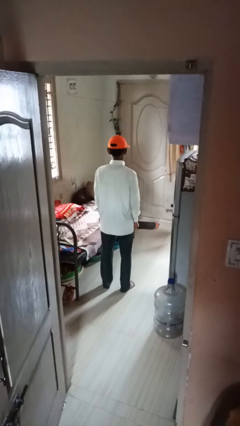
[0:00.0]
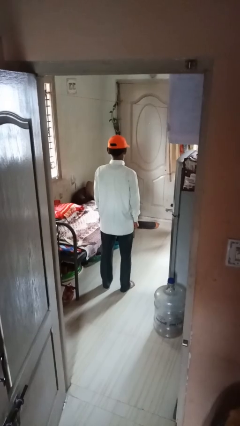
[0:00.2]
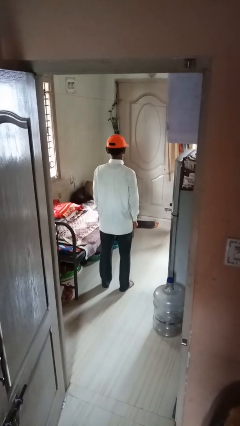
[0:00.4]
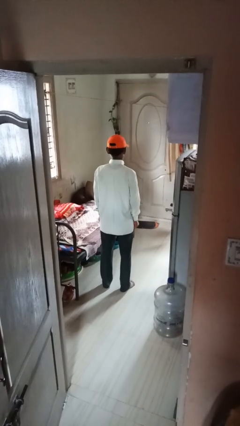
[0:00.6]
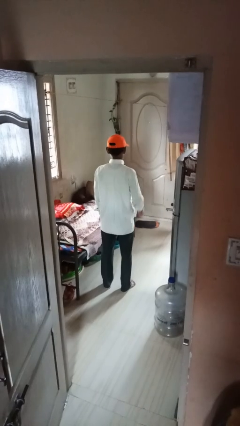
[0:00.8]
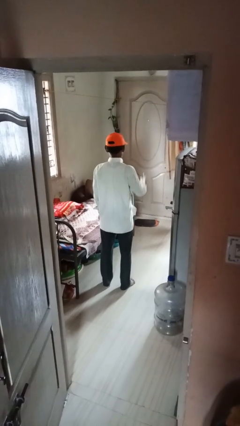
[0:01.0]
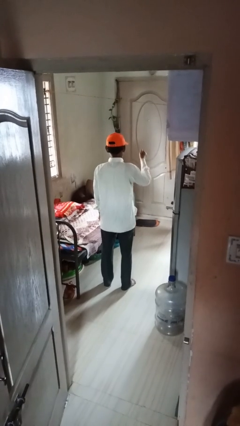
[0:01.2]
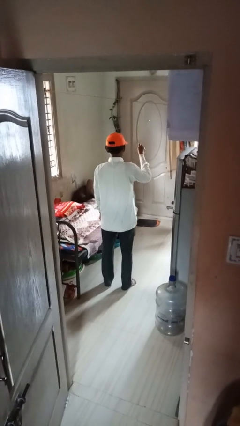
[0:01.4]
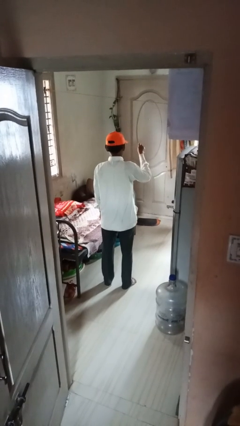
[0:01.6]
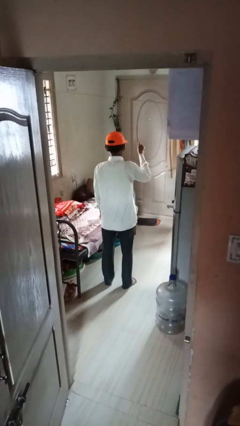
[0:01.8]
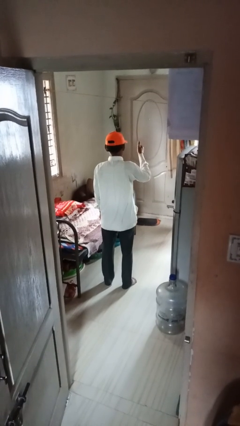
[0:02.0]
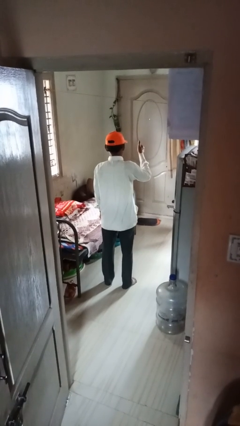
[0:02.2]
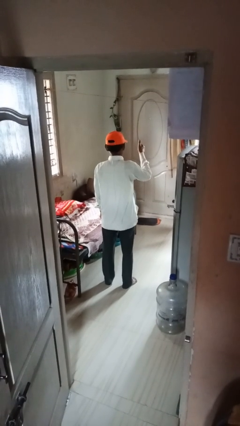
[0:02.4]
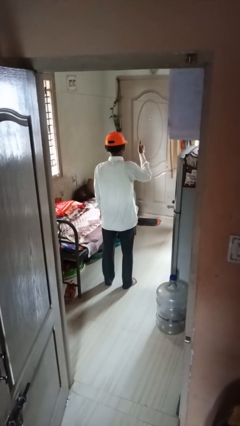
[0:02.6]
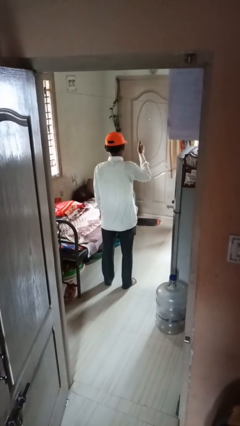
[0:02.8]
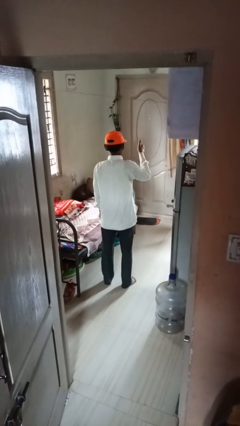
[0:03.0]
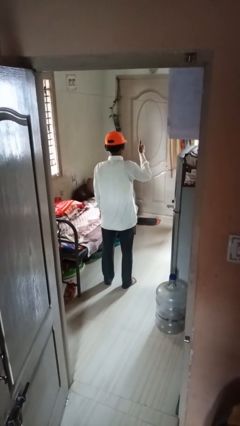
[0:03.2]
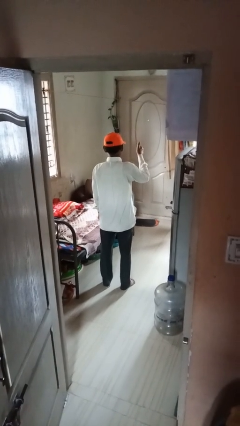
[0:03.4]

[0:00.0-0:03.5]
person gestures thumbs up

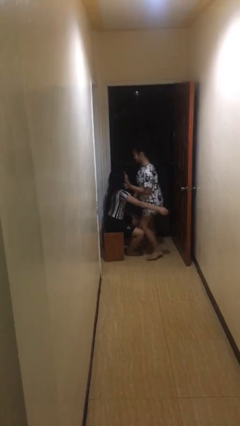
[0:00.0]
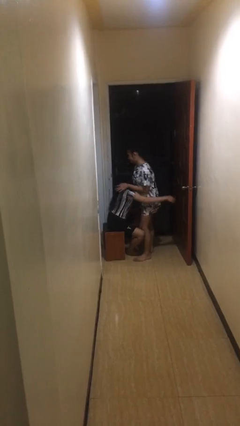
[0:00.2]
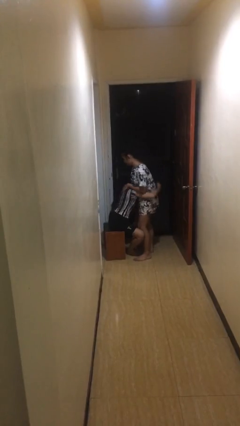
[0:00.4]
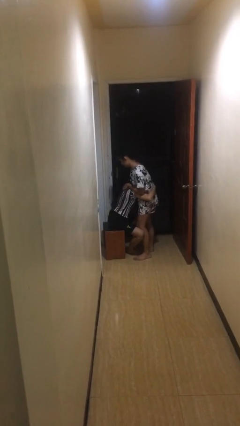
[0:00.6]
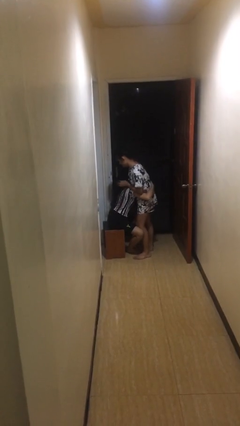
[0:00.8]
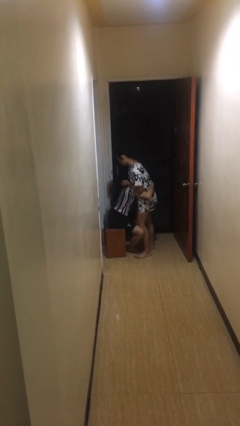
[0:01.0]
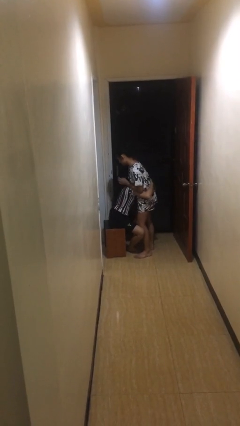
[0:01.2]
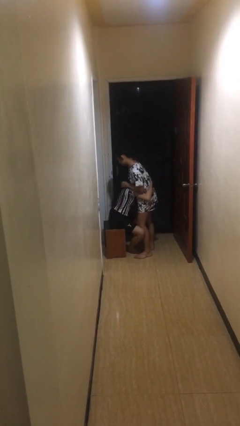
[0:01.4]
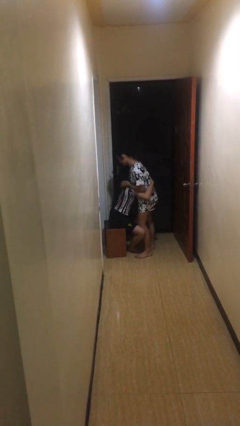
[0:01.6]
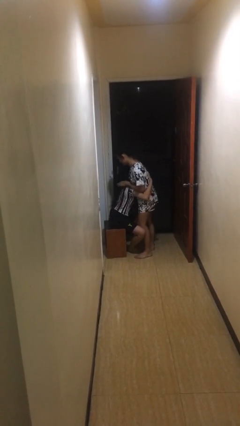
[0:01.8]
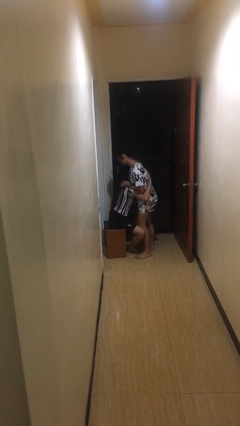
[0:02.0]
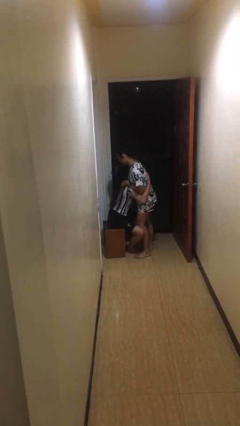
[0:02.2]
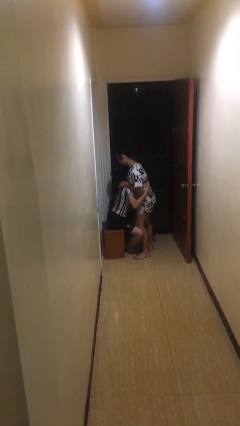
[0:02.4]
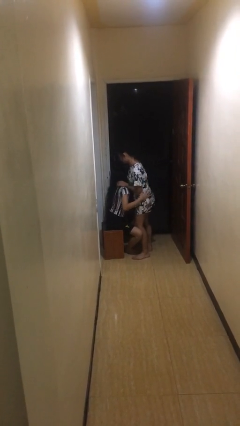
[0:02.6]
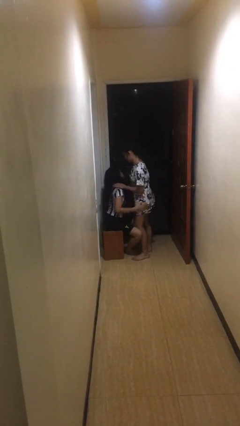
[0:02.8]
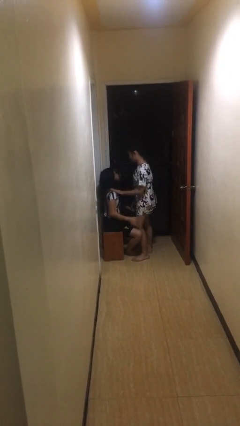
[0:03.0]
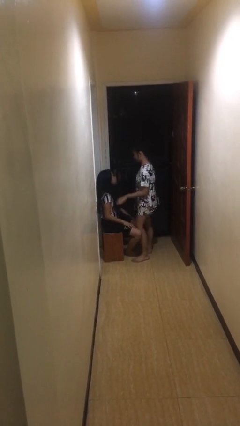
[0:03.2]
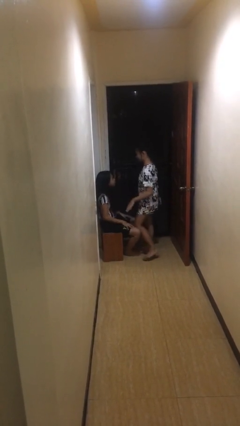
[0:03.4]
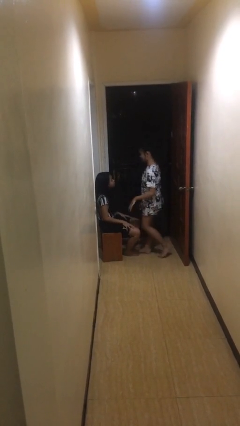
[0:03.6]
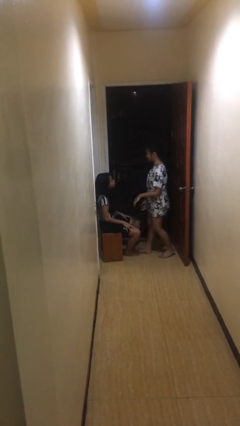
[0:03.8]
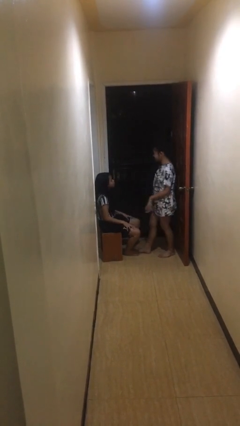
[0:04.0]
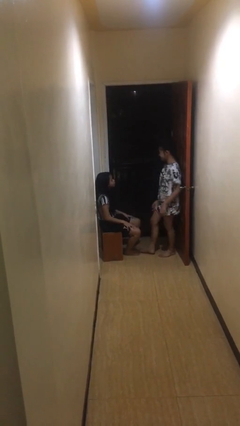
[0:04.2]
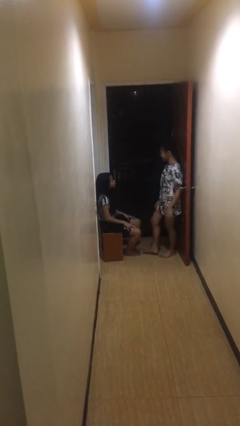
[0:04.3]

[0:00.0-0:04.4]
person embraces person

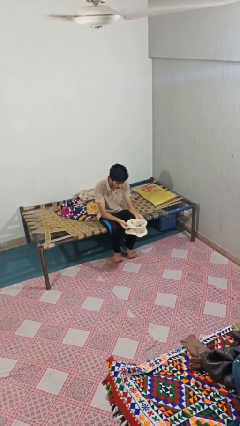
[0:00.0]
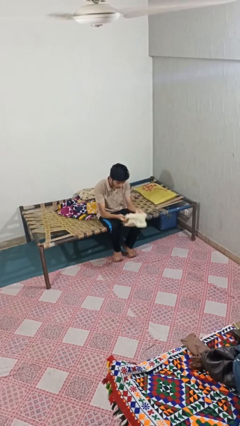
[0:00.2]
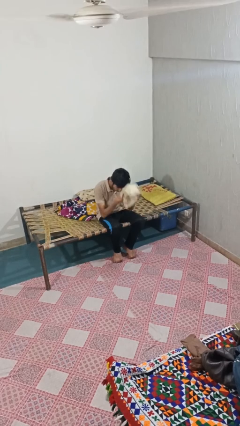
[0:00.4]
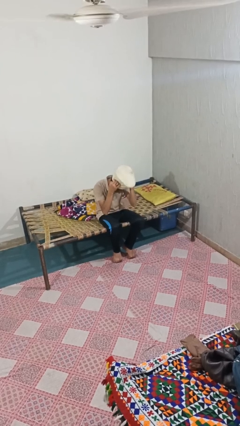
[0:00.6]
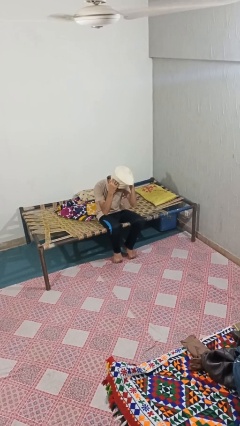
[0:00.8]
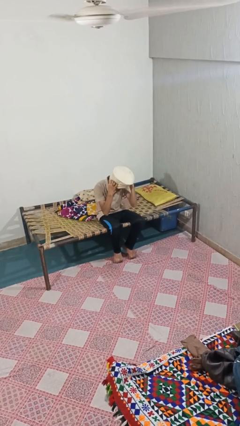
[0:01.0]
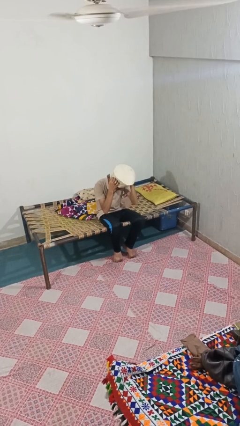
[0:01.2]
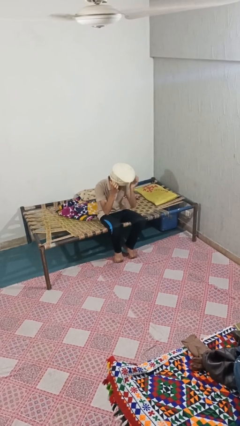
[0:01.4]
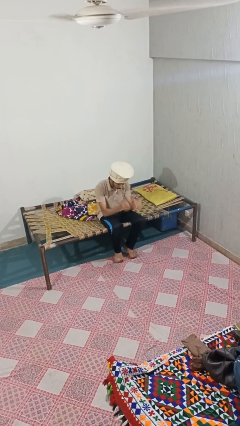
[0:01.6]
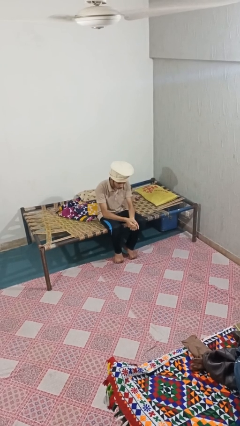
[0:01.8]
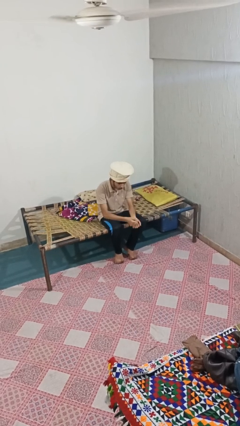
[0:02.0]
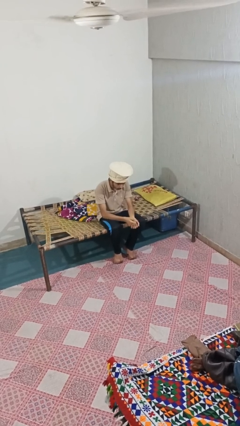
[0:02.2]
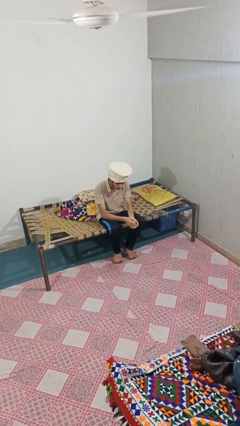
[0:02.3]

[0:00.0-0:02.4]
person puts on hat

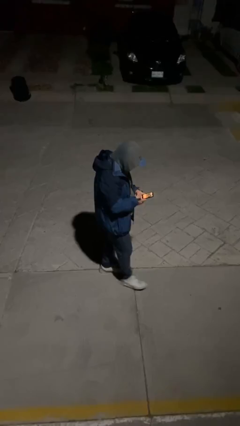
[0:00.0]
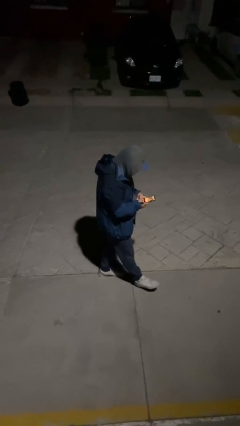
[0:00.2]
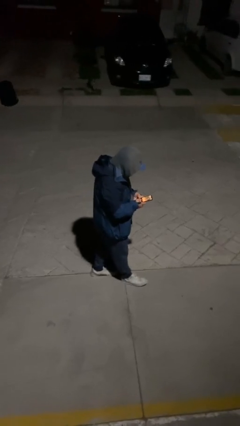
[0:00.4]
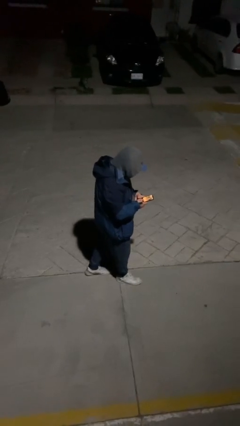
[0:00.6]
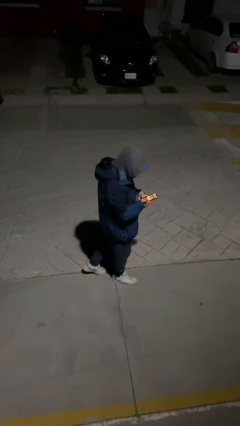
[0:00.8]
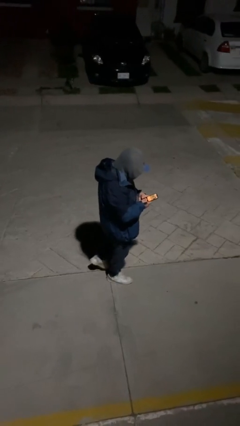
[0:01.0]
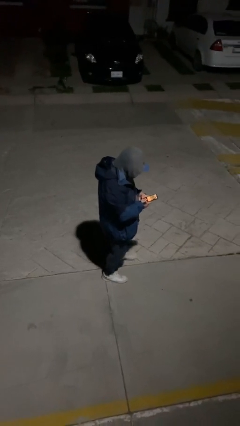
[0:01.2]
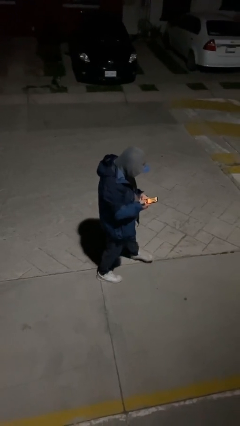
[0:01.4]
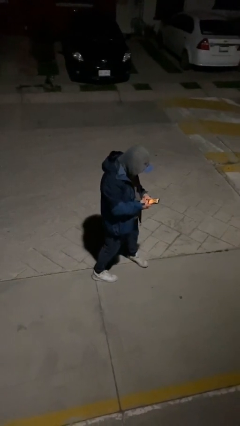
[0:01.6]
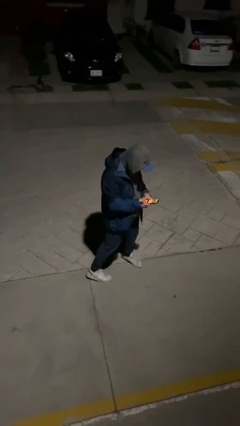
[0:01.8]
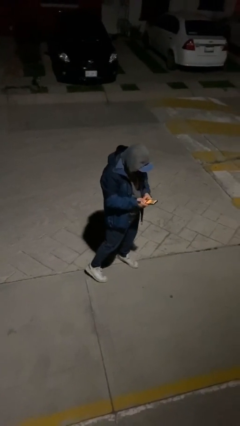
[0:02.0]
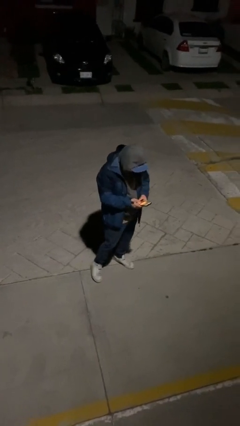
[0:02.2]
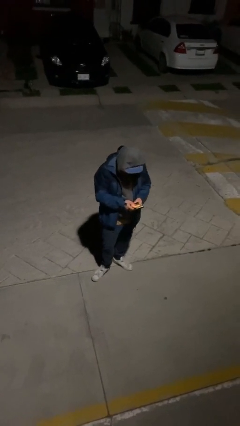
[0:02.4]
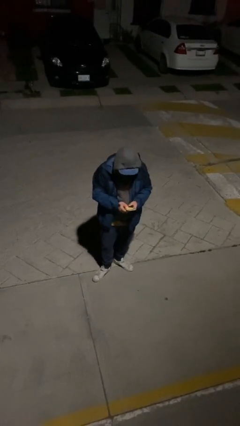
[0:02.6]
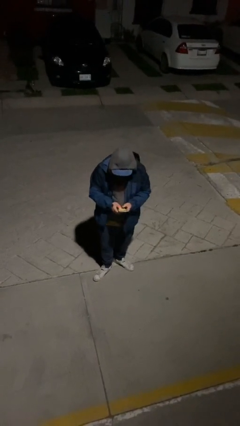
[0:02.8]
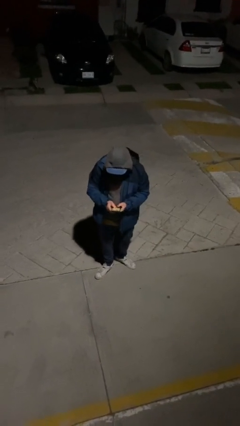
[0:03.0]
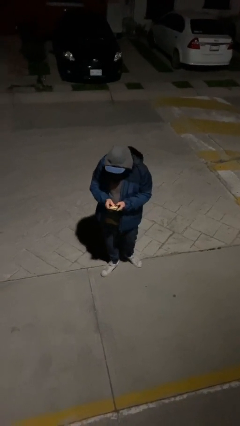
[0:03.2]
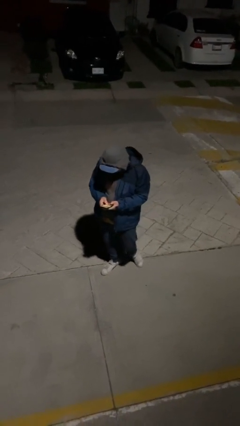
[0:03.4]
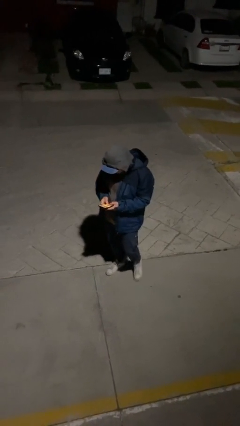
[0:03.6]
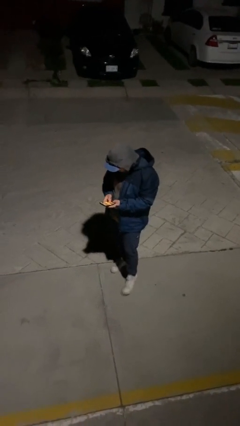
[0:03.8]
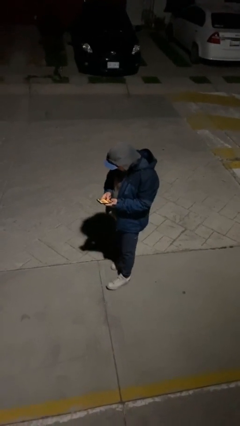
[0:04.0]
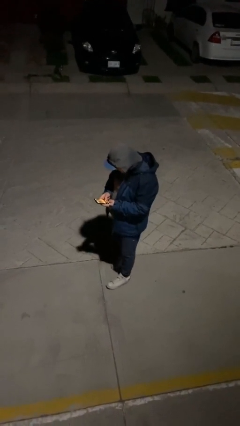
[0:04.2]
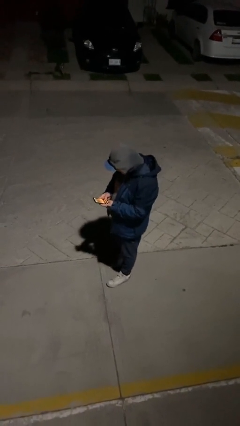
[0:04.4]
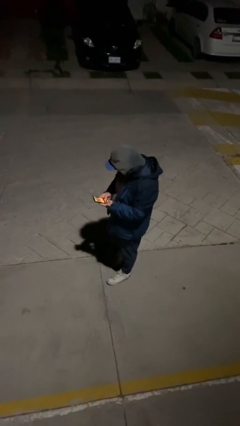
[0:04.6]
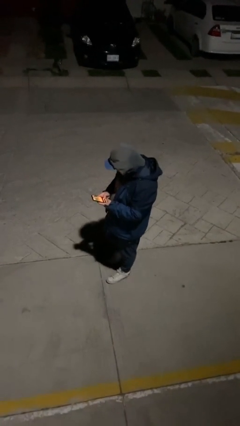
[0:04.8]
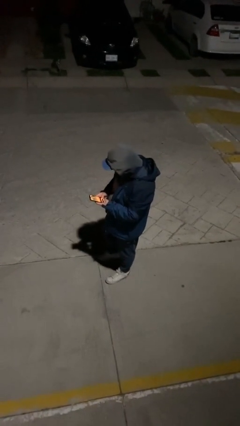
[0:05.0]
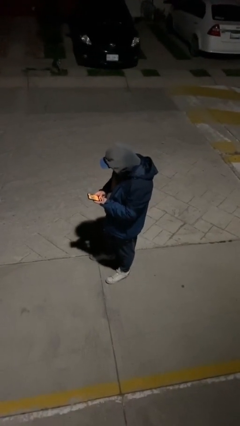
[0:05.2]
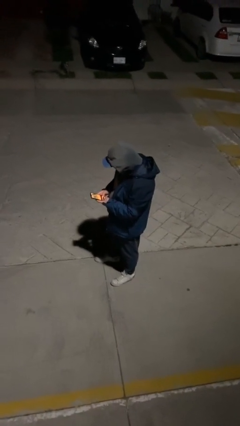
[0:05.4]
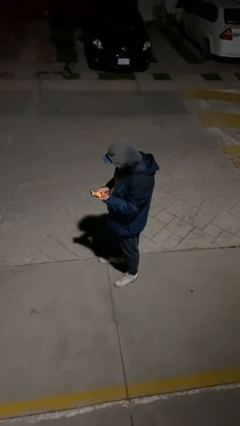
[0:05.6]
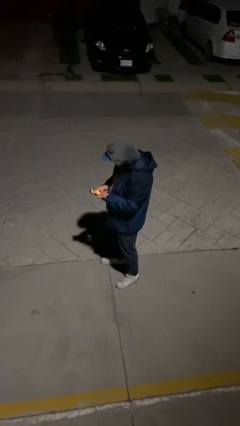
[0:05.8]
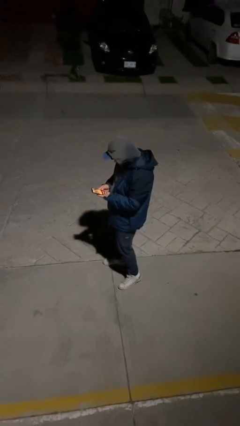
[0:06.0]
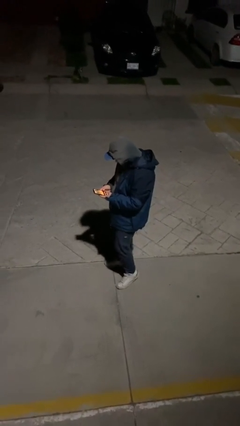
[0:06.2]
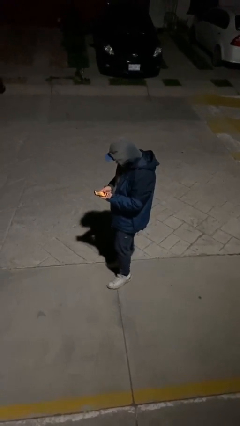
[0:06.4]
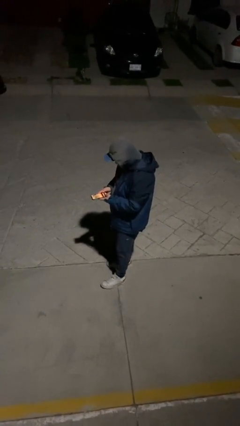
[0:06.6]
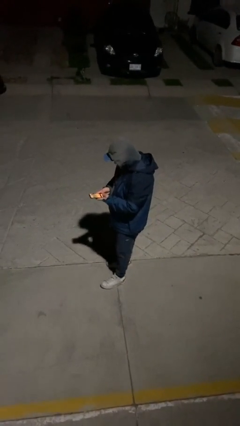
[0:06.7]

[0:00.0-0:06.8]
person texts on phone

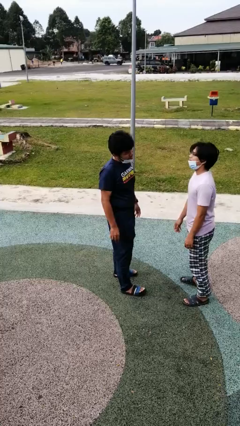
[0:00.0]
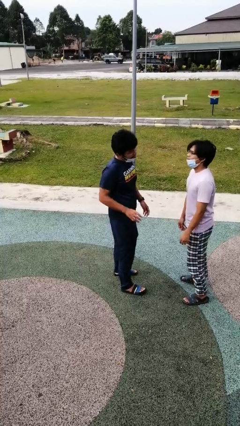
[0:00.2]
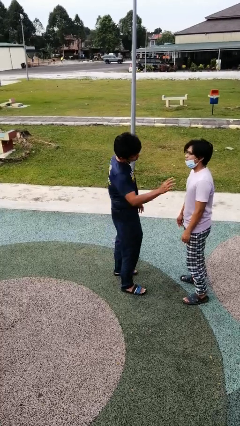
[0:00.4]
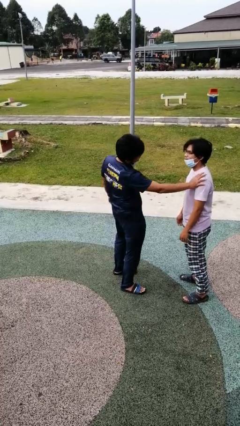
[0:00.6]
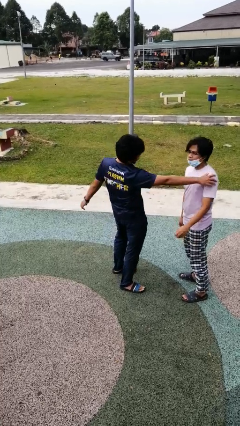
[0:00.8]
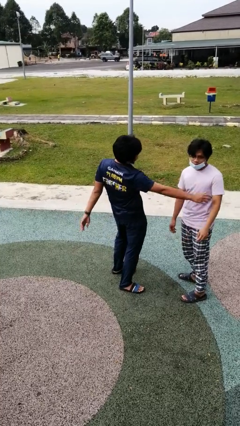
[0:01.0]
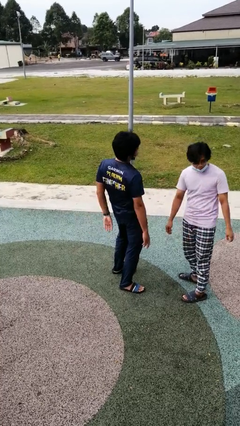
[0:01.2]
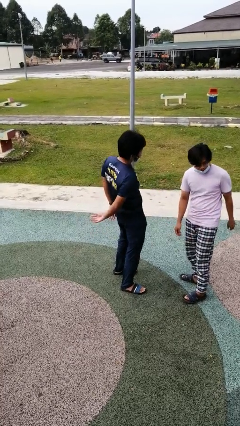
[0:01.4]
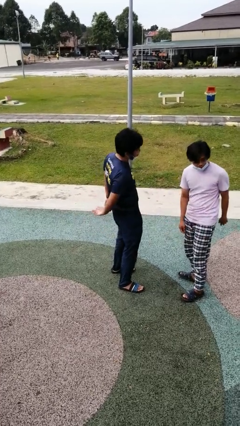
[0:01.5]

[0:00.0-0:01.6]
person shoves person
